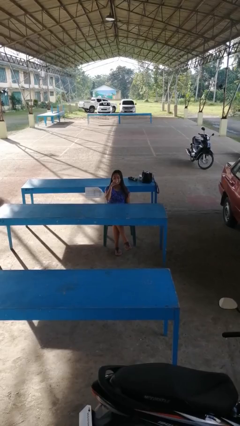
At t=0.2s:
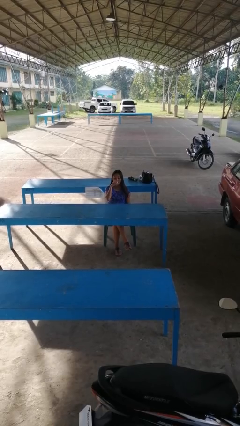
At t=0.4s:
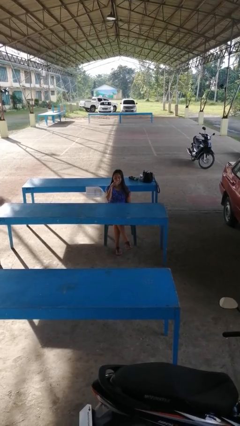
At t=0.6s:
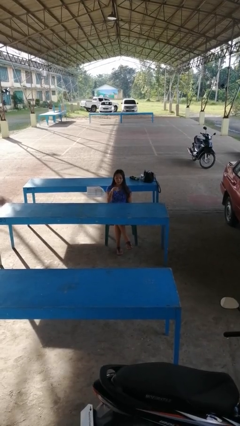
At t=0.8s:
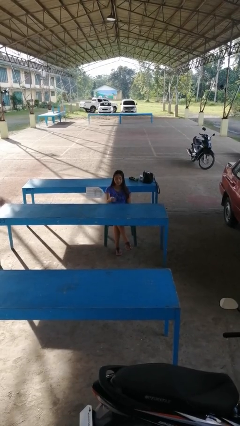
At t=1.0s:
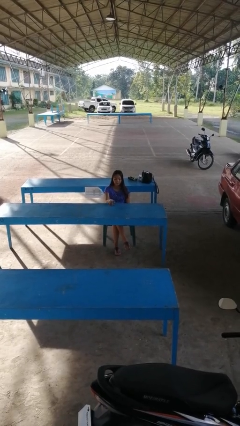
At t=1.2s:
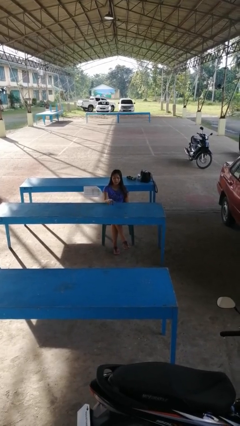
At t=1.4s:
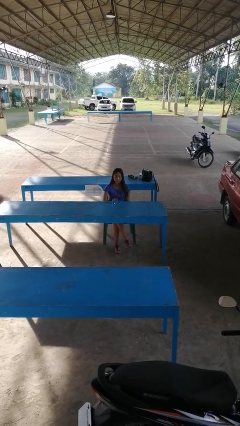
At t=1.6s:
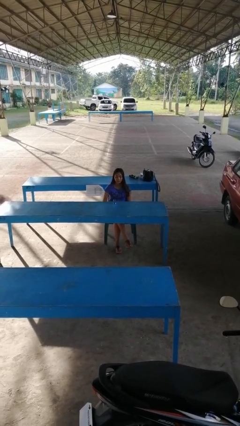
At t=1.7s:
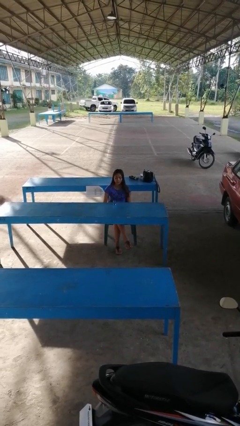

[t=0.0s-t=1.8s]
person puts down object on table

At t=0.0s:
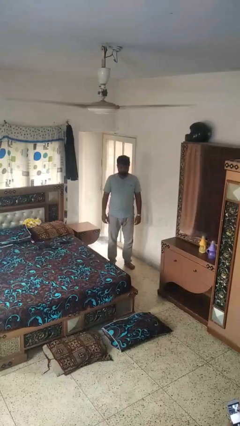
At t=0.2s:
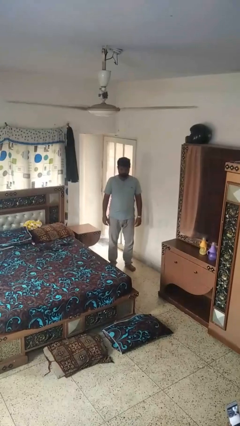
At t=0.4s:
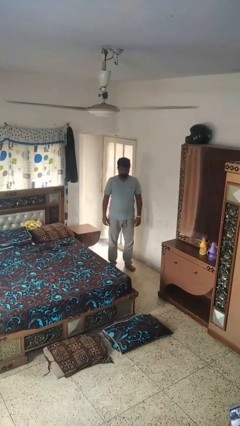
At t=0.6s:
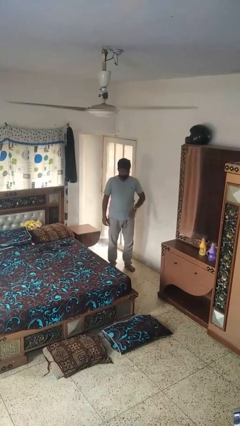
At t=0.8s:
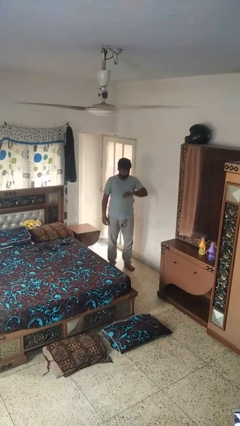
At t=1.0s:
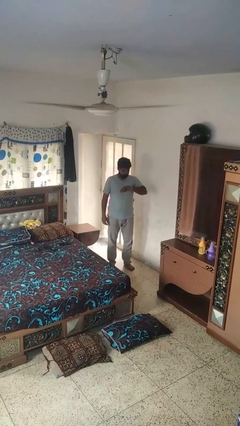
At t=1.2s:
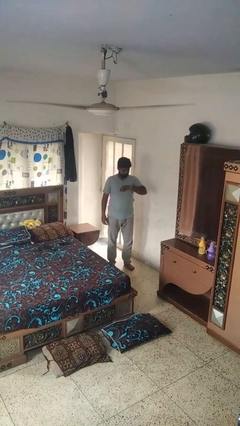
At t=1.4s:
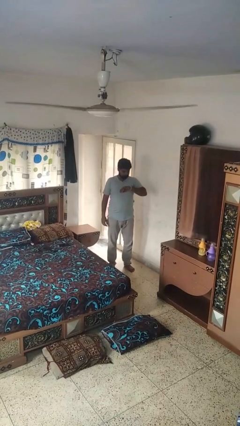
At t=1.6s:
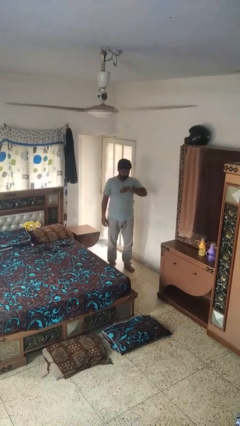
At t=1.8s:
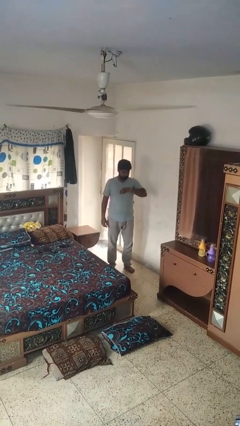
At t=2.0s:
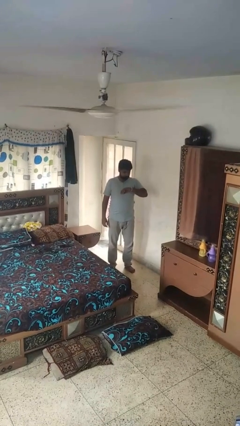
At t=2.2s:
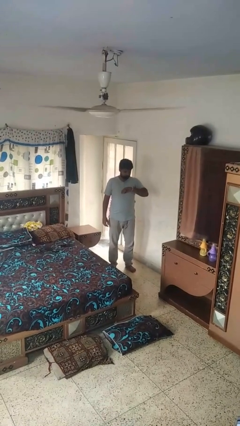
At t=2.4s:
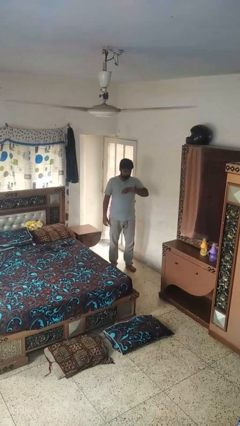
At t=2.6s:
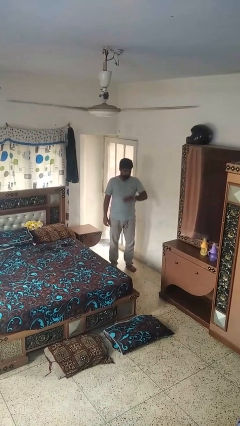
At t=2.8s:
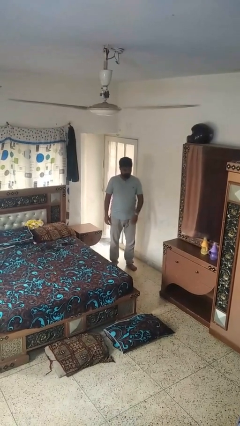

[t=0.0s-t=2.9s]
person looks at wristwatch

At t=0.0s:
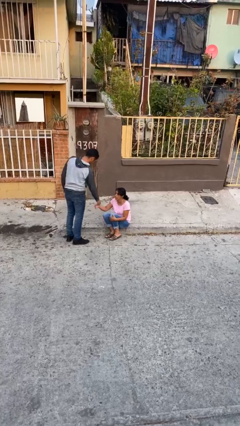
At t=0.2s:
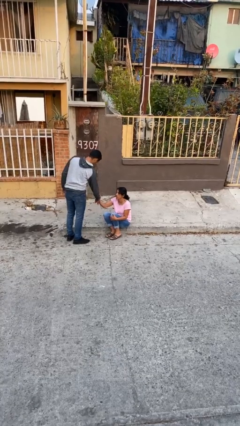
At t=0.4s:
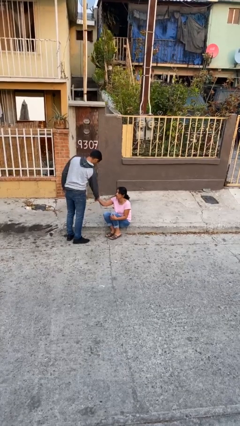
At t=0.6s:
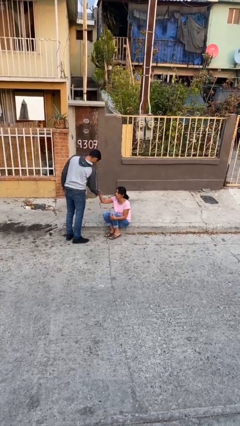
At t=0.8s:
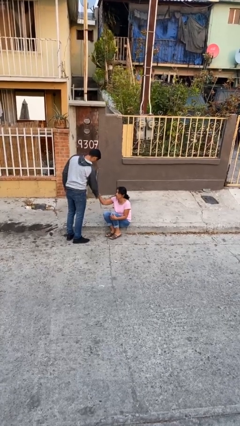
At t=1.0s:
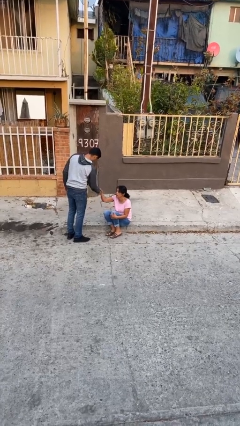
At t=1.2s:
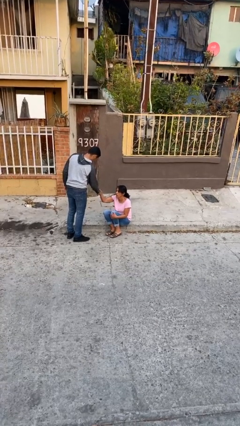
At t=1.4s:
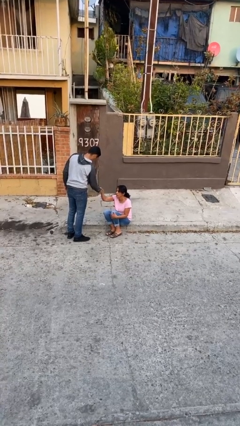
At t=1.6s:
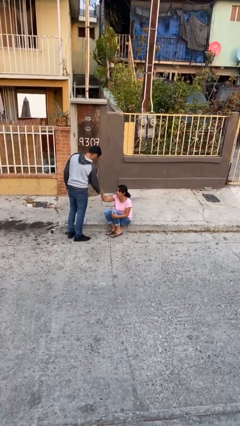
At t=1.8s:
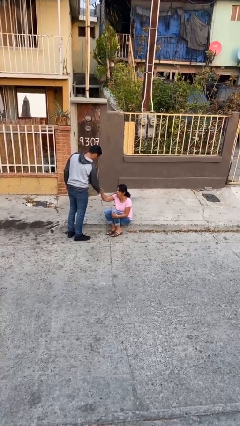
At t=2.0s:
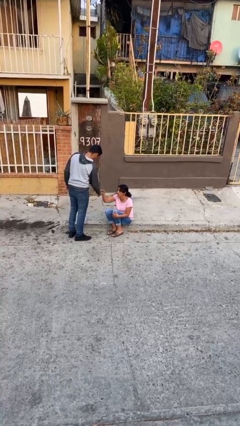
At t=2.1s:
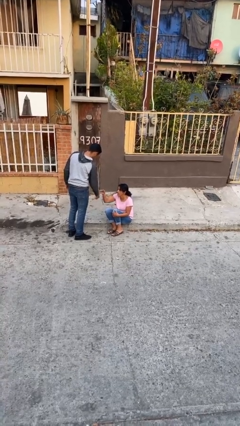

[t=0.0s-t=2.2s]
person shakes hand

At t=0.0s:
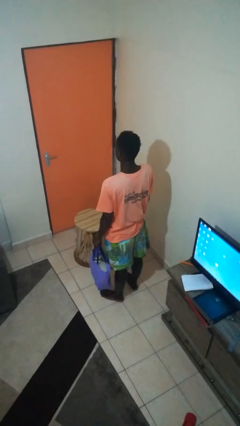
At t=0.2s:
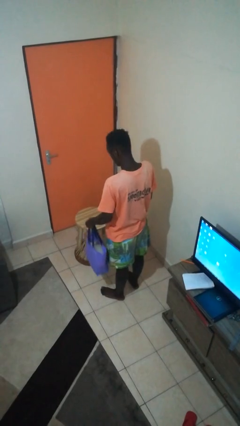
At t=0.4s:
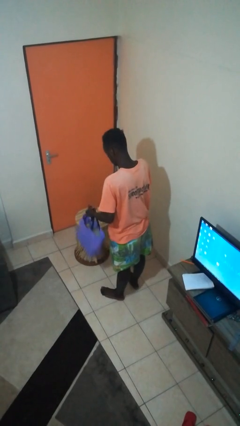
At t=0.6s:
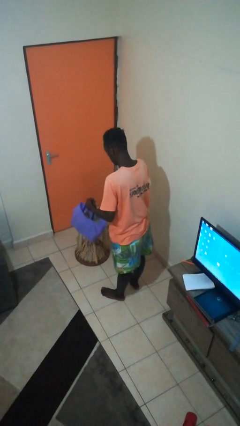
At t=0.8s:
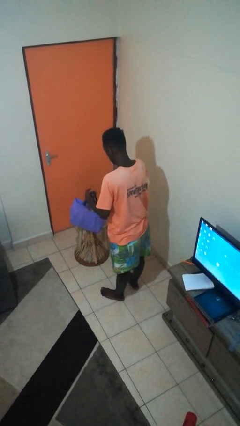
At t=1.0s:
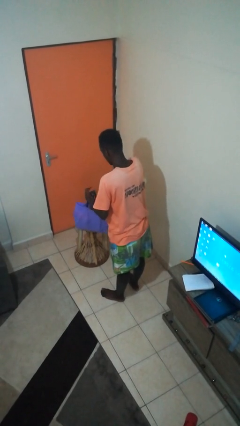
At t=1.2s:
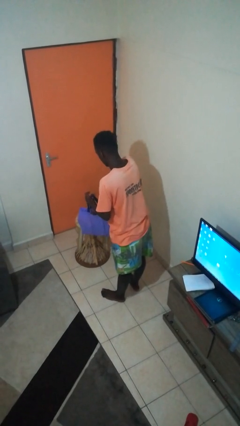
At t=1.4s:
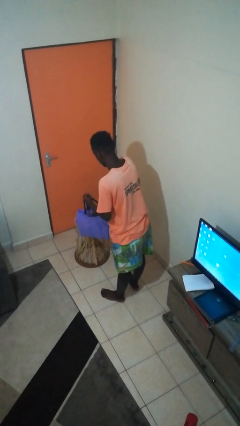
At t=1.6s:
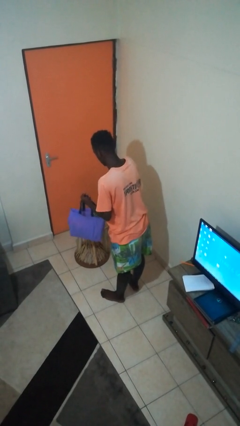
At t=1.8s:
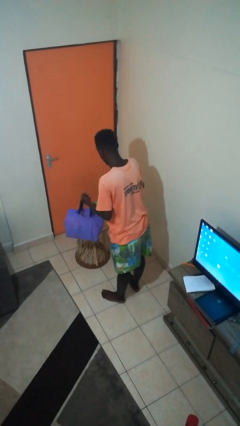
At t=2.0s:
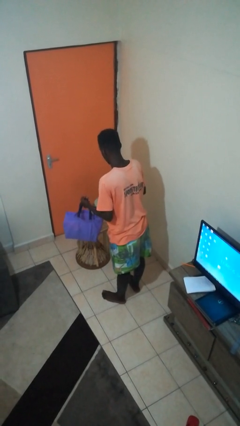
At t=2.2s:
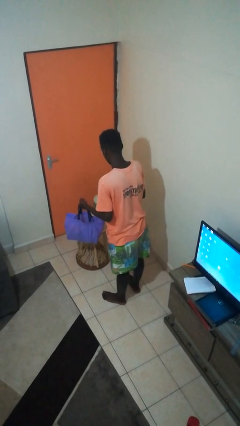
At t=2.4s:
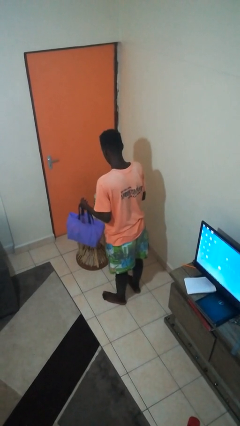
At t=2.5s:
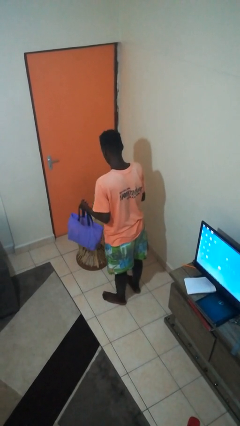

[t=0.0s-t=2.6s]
person takes object from bag

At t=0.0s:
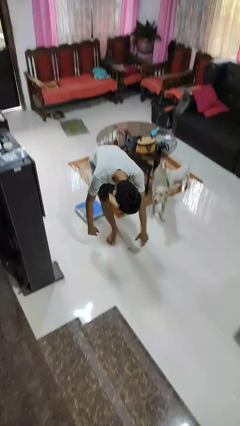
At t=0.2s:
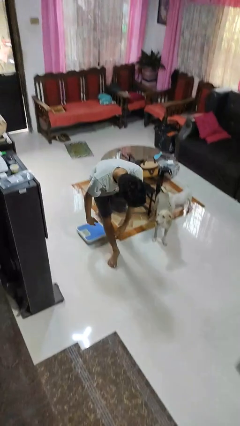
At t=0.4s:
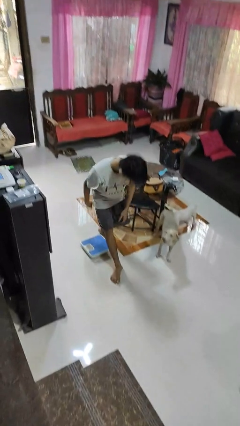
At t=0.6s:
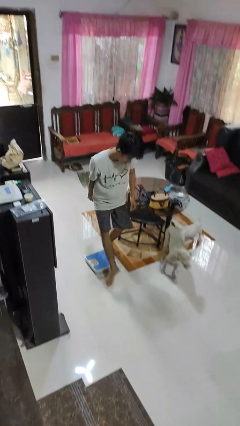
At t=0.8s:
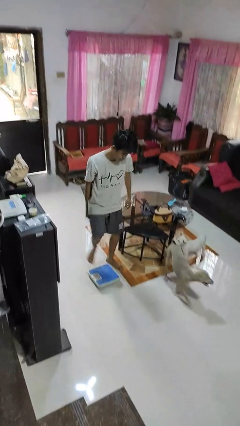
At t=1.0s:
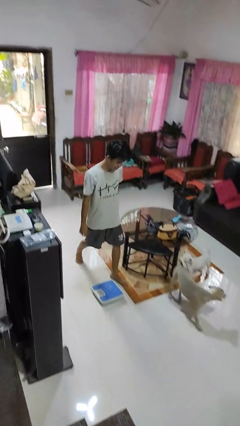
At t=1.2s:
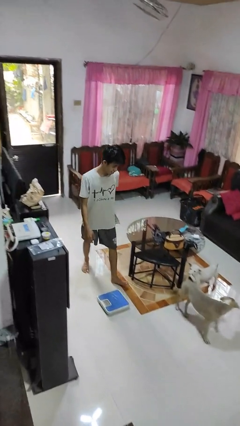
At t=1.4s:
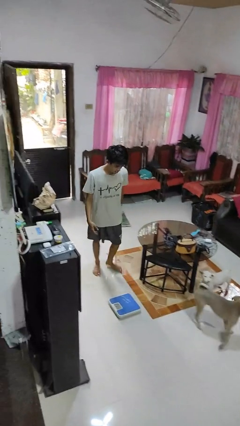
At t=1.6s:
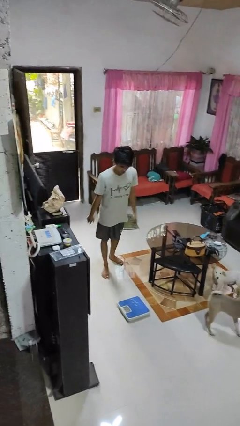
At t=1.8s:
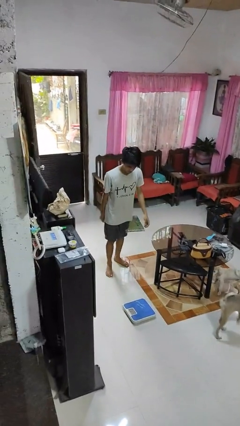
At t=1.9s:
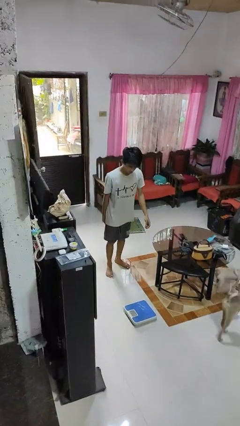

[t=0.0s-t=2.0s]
person stands up from floor

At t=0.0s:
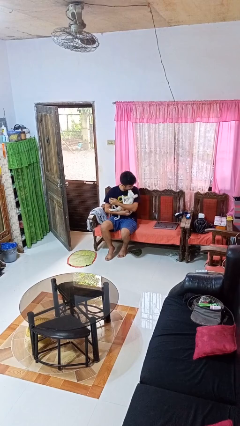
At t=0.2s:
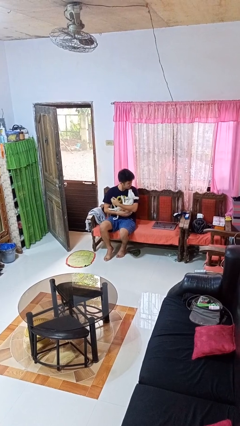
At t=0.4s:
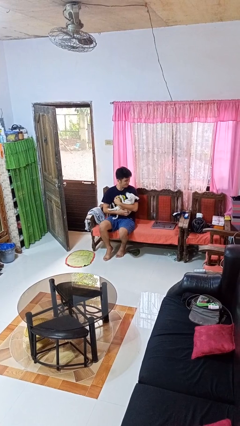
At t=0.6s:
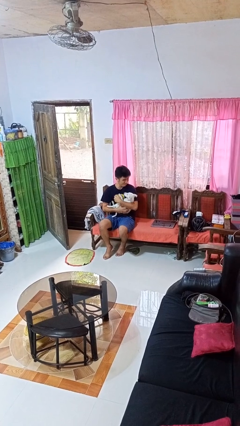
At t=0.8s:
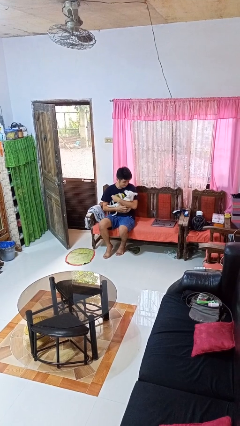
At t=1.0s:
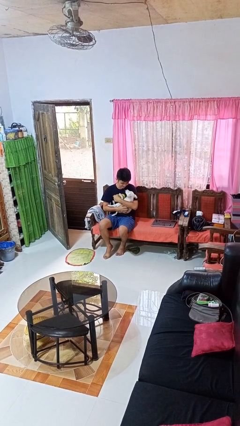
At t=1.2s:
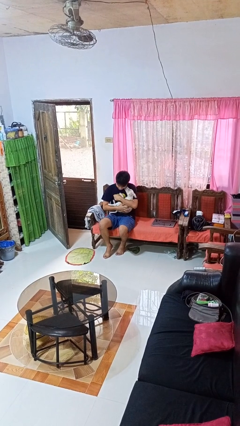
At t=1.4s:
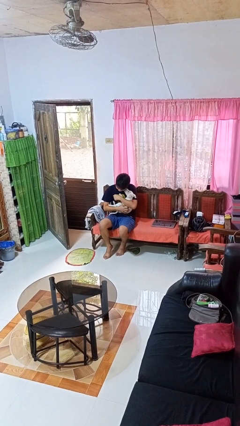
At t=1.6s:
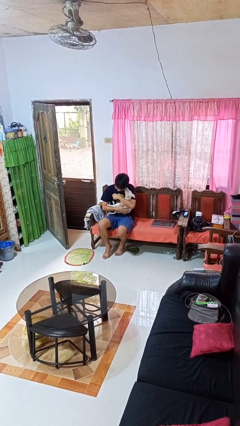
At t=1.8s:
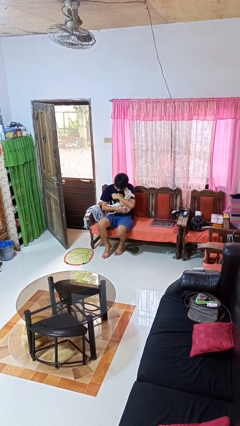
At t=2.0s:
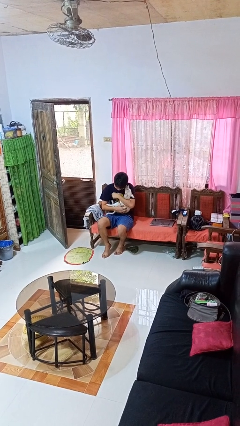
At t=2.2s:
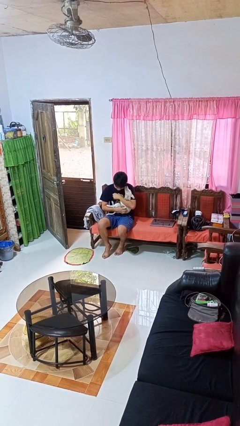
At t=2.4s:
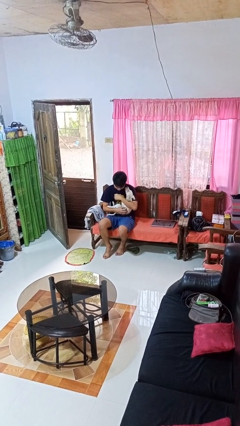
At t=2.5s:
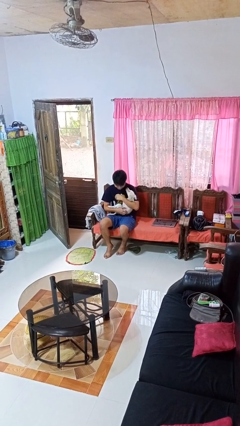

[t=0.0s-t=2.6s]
person hugs dog

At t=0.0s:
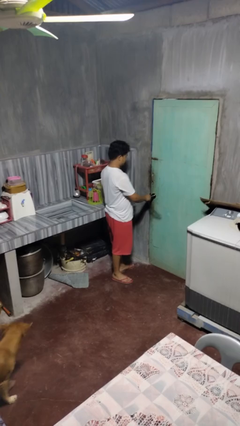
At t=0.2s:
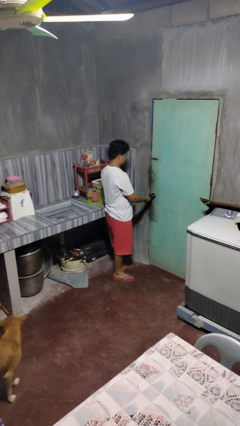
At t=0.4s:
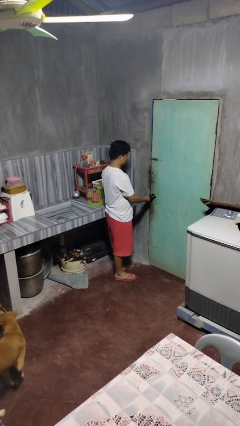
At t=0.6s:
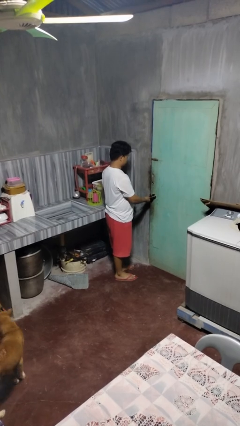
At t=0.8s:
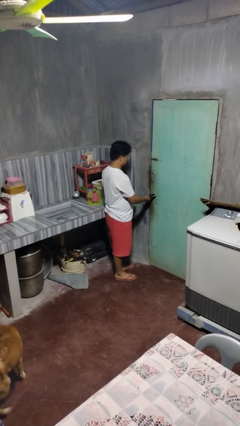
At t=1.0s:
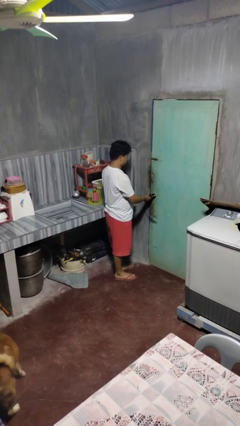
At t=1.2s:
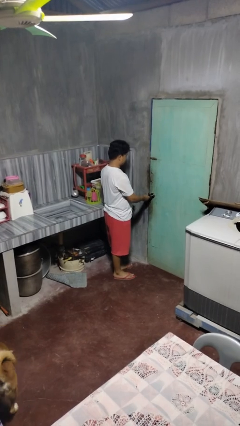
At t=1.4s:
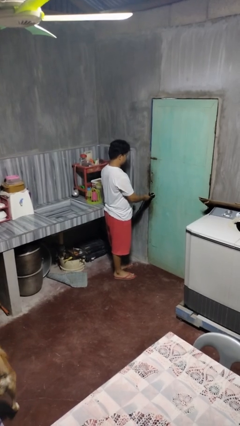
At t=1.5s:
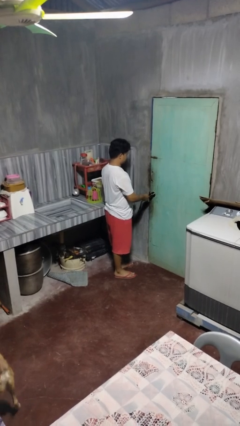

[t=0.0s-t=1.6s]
person locks door with keys

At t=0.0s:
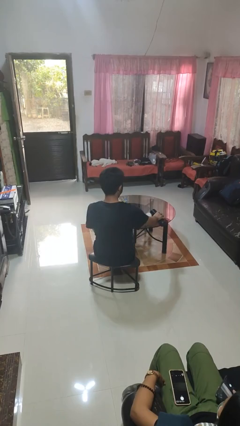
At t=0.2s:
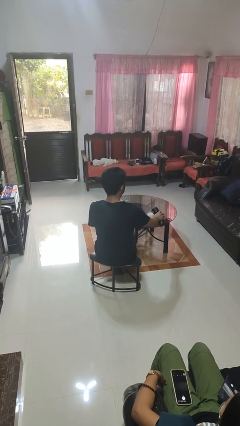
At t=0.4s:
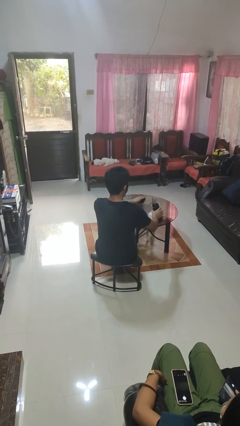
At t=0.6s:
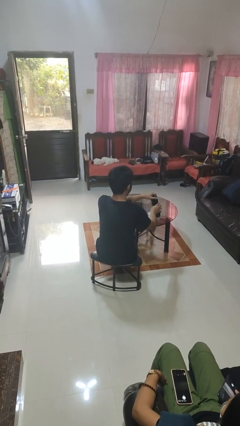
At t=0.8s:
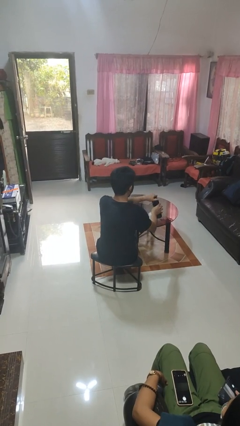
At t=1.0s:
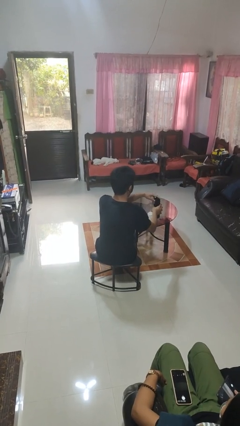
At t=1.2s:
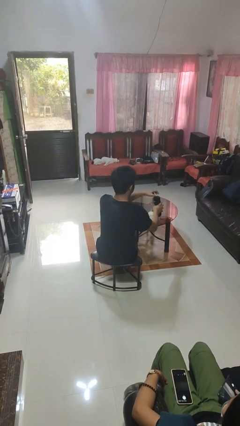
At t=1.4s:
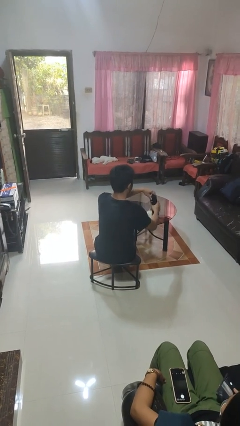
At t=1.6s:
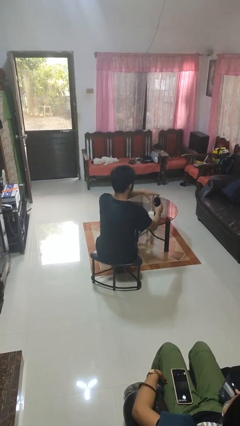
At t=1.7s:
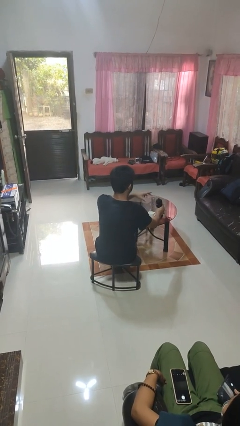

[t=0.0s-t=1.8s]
person screws lid to bottle
